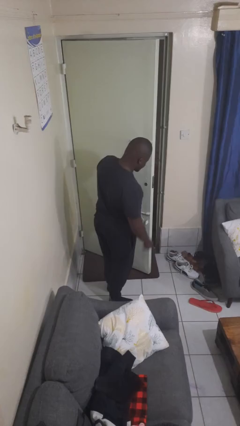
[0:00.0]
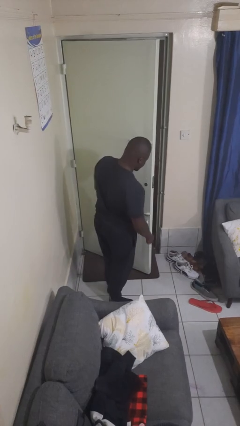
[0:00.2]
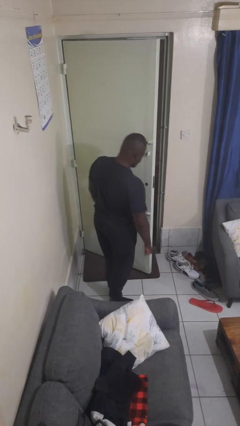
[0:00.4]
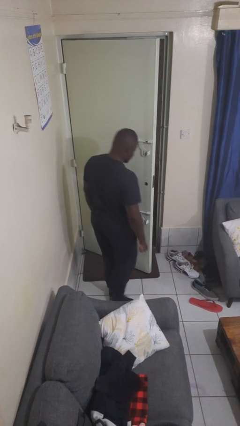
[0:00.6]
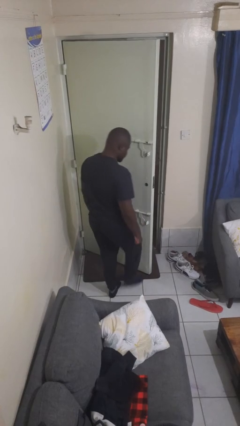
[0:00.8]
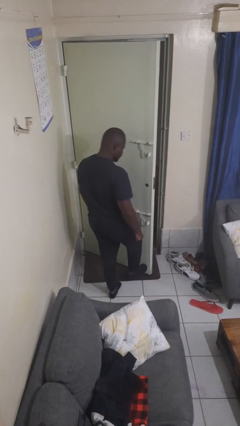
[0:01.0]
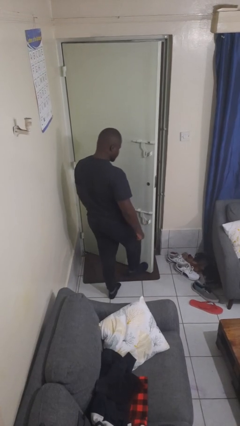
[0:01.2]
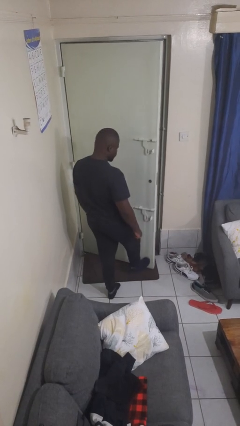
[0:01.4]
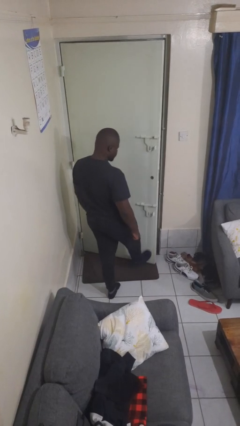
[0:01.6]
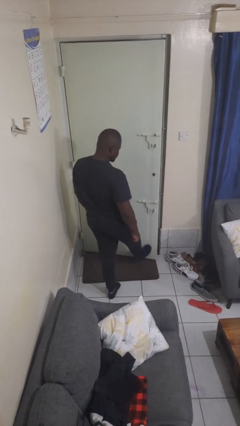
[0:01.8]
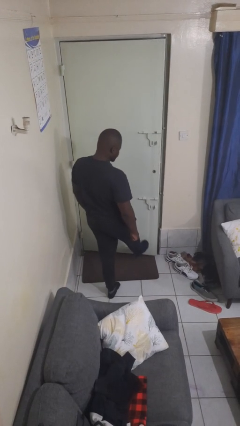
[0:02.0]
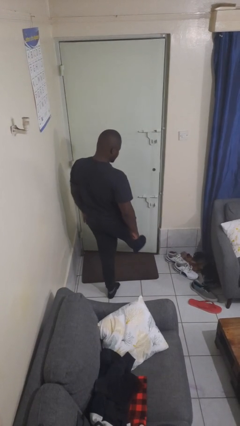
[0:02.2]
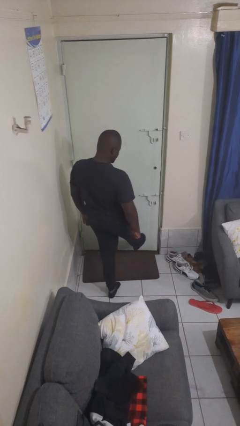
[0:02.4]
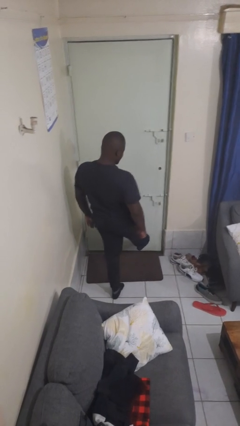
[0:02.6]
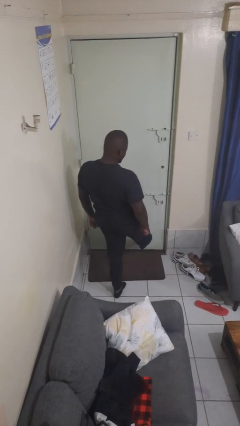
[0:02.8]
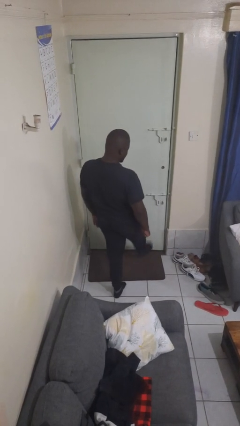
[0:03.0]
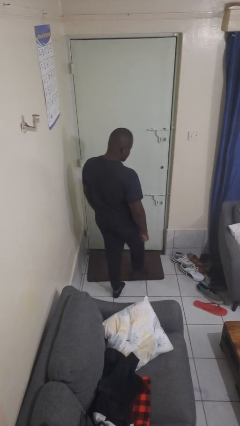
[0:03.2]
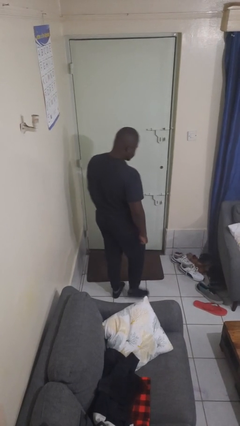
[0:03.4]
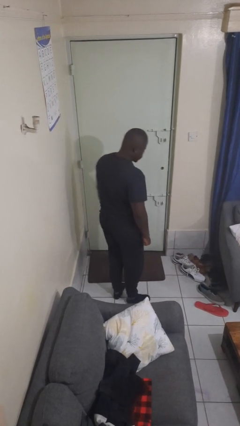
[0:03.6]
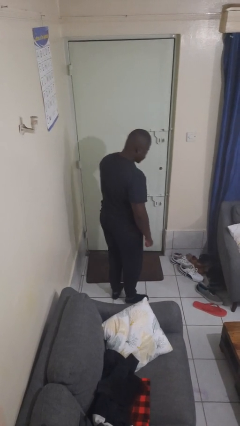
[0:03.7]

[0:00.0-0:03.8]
person closes door with foot

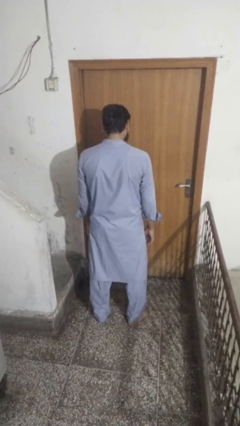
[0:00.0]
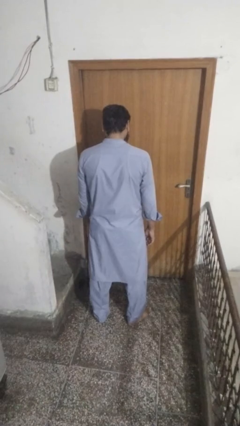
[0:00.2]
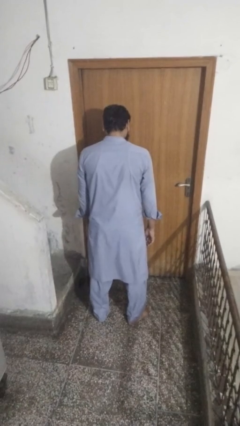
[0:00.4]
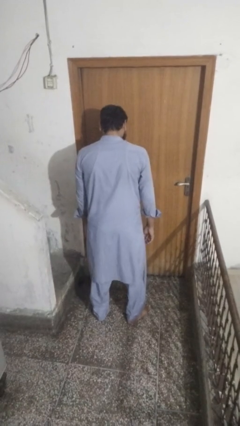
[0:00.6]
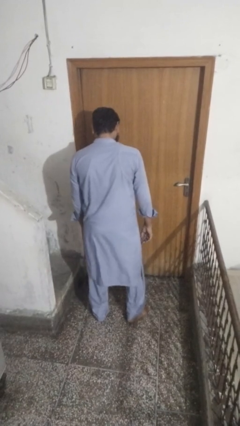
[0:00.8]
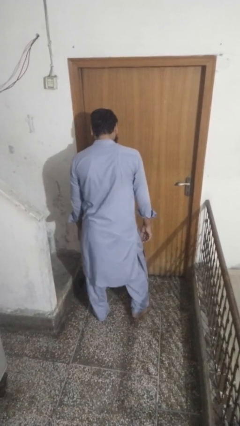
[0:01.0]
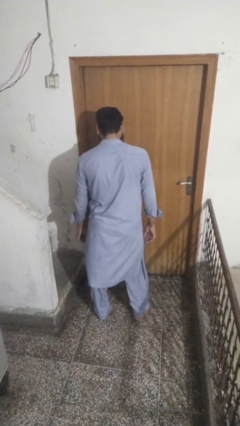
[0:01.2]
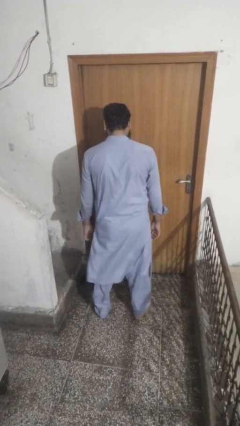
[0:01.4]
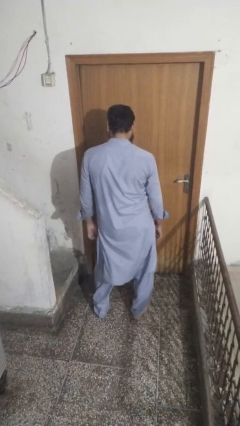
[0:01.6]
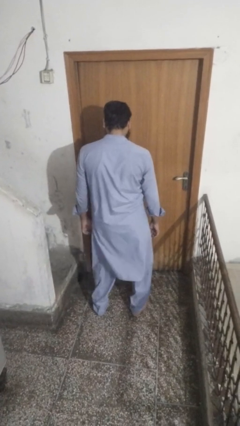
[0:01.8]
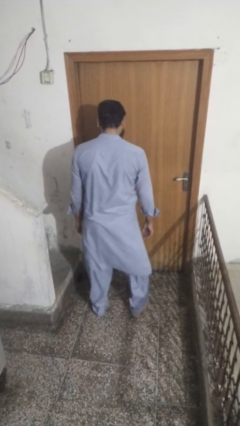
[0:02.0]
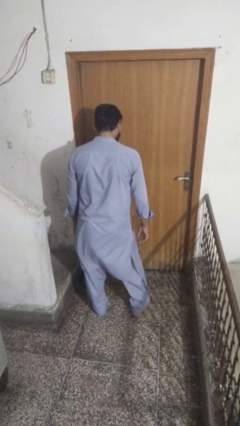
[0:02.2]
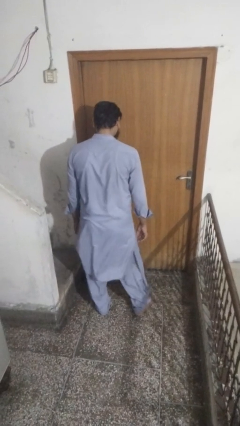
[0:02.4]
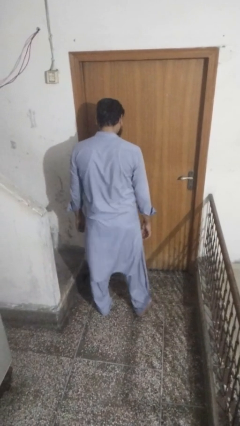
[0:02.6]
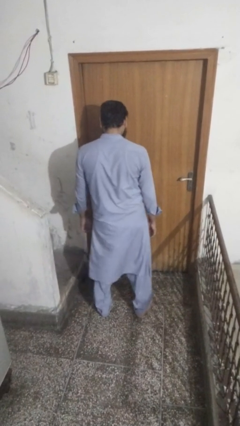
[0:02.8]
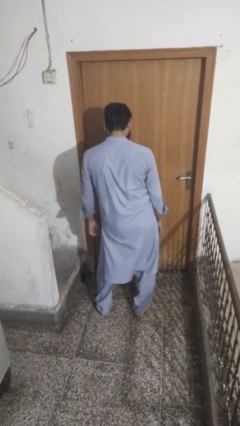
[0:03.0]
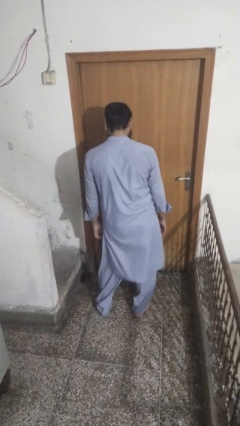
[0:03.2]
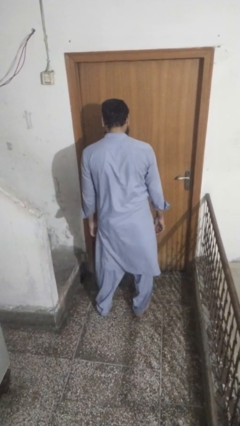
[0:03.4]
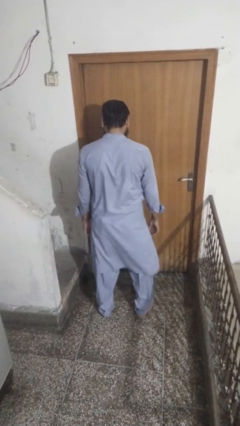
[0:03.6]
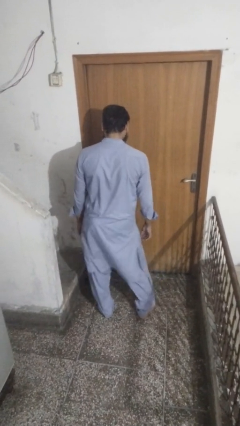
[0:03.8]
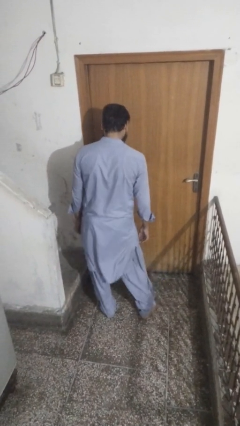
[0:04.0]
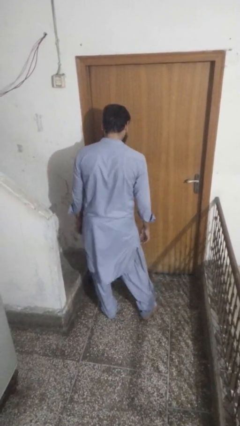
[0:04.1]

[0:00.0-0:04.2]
person wiggles hips

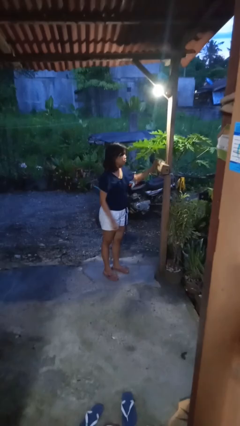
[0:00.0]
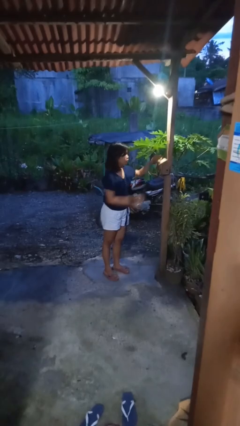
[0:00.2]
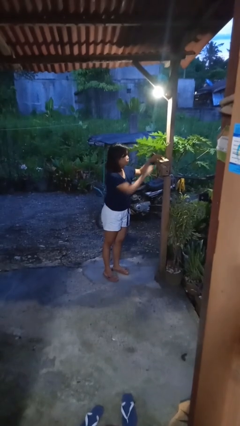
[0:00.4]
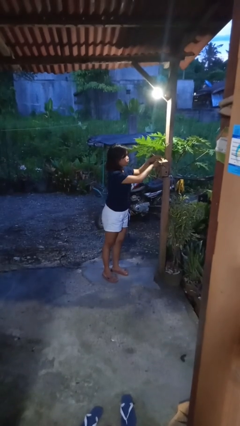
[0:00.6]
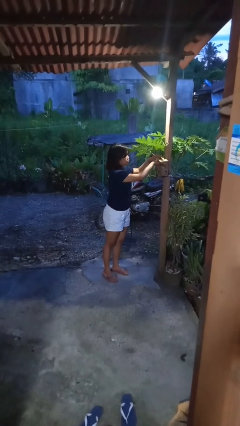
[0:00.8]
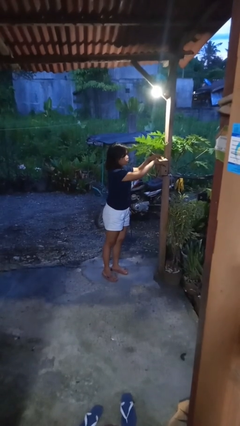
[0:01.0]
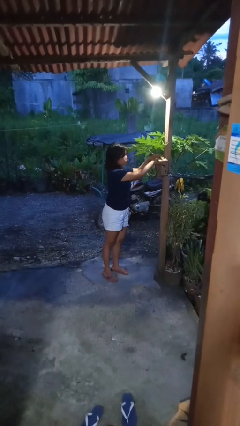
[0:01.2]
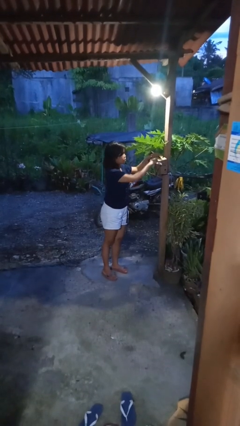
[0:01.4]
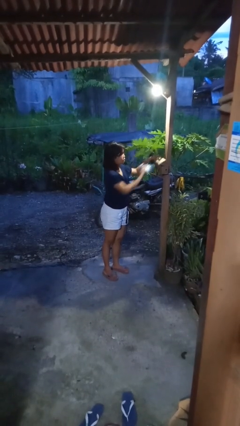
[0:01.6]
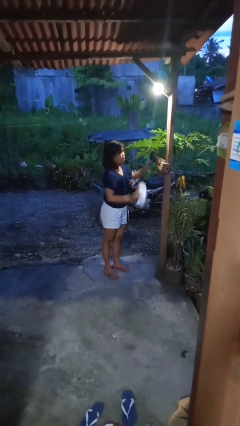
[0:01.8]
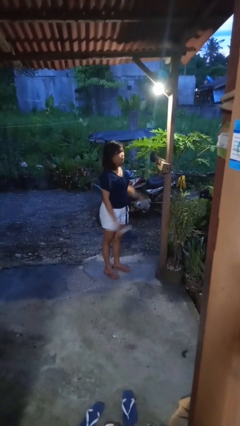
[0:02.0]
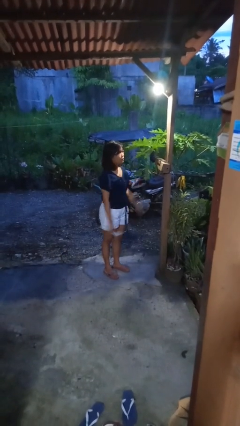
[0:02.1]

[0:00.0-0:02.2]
person takes letters from mailbox

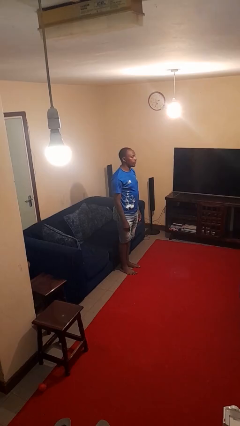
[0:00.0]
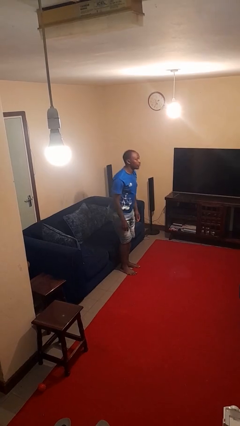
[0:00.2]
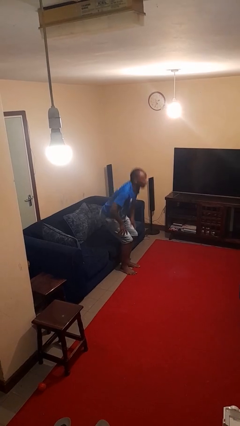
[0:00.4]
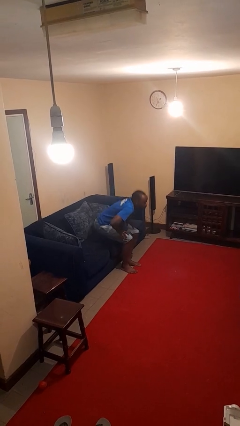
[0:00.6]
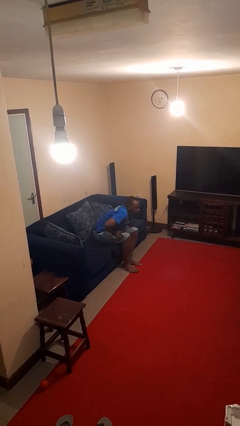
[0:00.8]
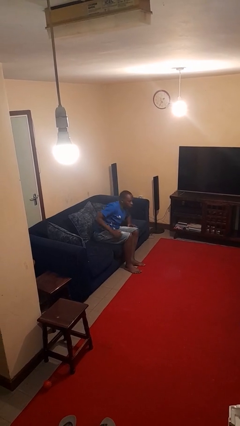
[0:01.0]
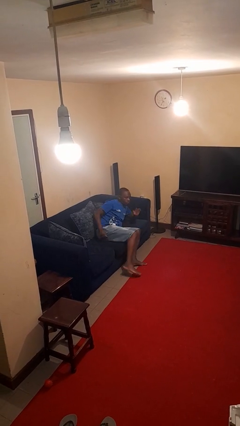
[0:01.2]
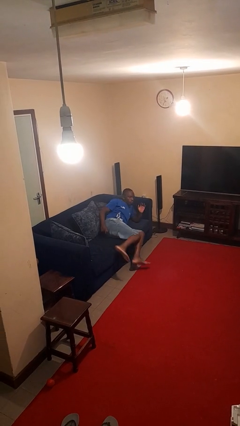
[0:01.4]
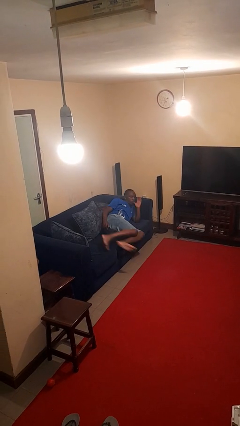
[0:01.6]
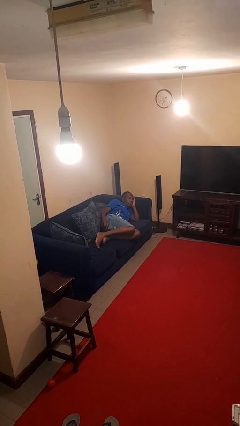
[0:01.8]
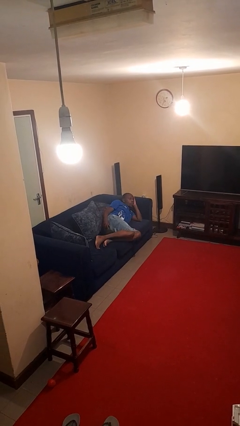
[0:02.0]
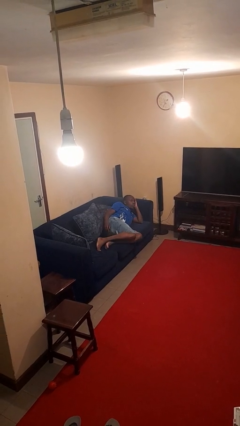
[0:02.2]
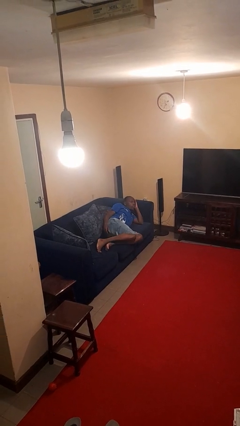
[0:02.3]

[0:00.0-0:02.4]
person lies down on couch

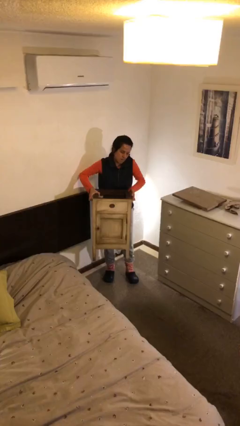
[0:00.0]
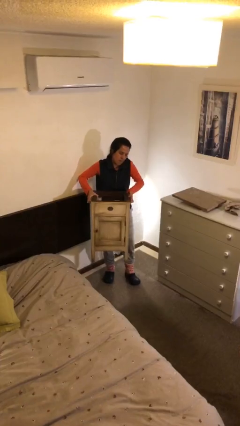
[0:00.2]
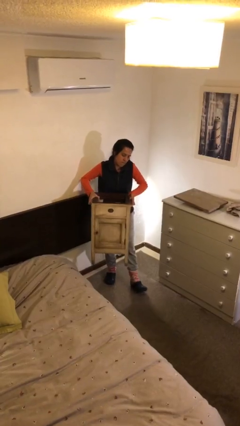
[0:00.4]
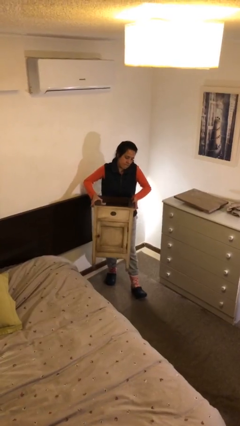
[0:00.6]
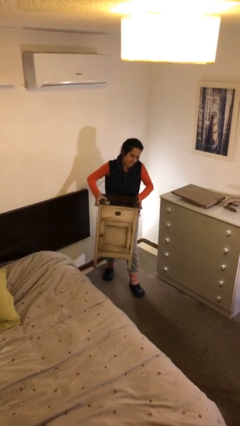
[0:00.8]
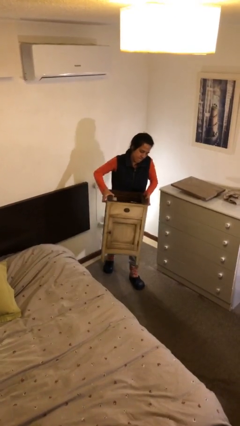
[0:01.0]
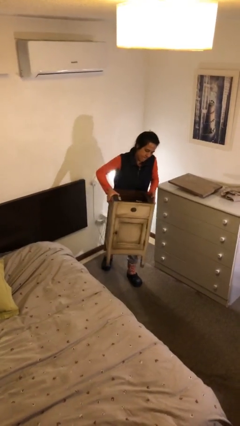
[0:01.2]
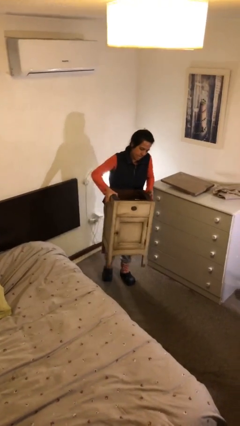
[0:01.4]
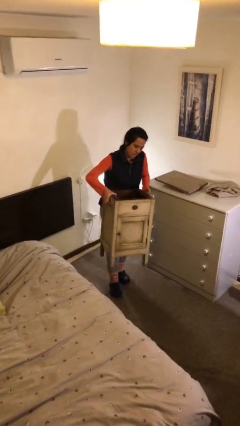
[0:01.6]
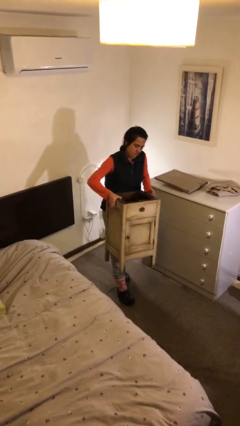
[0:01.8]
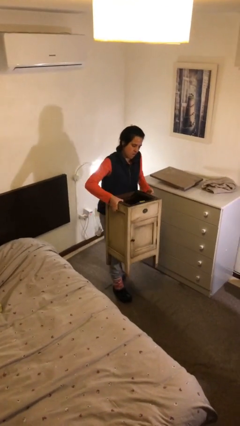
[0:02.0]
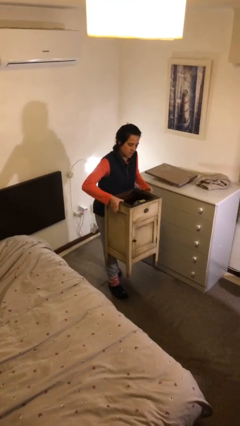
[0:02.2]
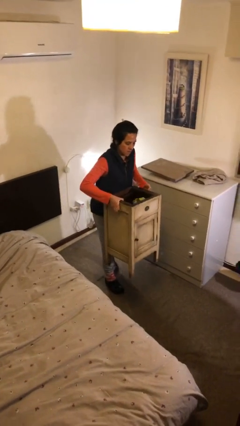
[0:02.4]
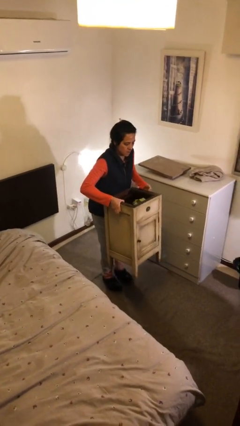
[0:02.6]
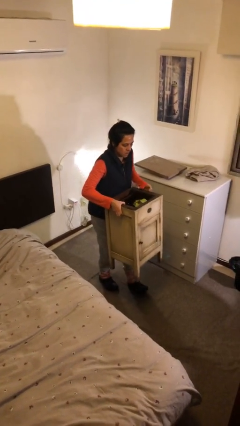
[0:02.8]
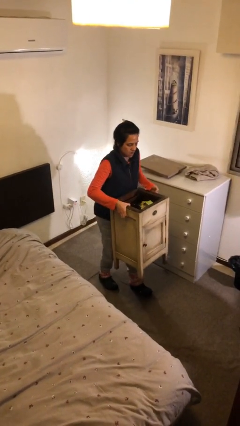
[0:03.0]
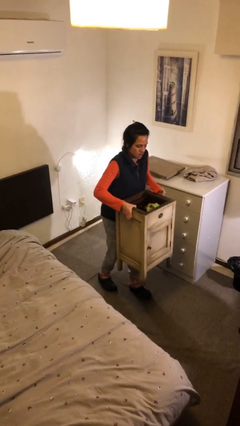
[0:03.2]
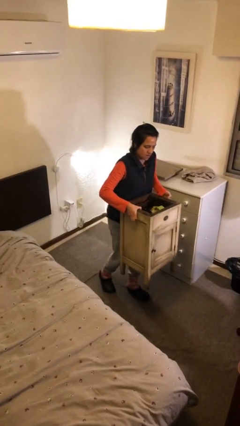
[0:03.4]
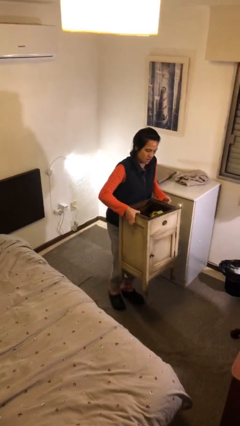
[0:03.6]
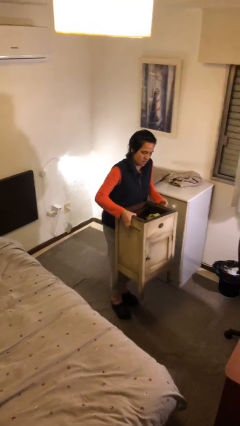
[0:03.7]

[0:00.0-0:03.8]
person carries heavy object

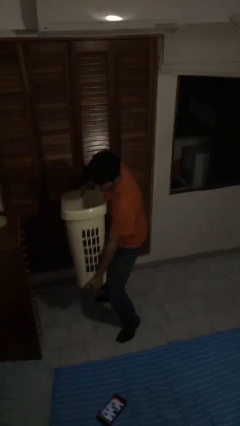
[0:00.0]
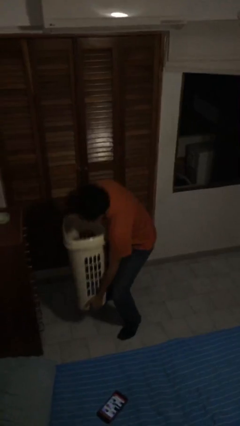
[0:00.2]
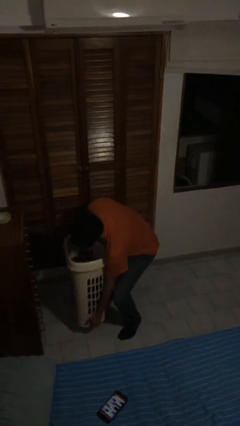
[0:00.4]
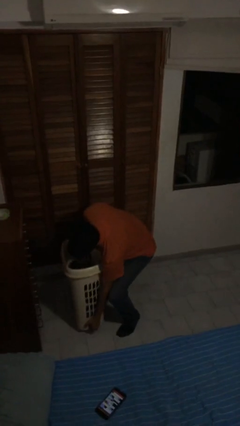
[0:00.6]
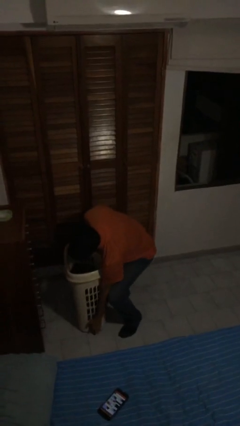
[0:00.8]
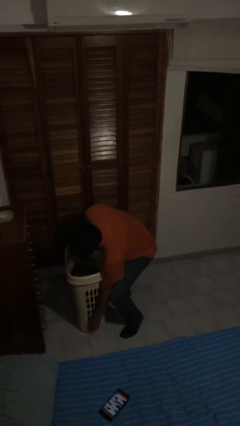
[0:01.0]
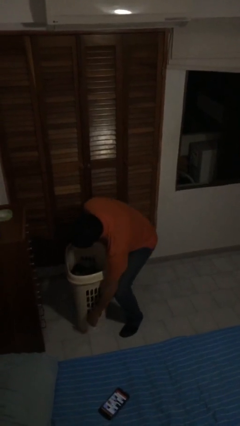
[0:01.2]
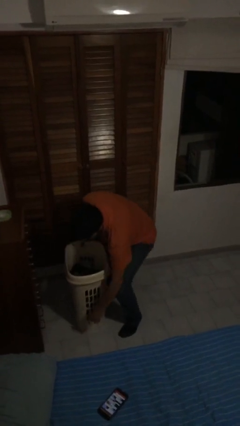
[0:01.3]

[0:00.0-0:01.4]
person puts down object on floor
